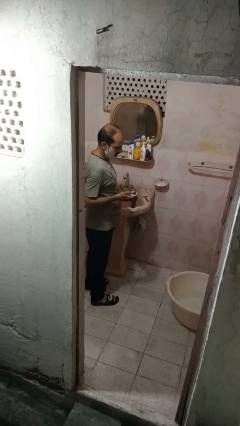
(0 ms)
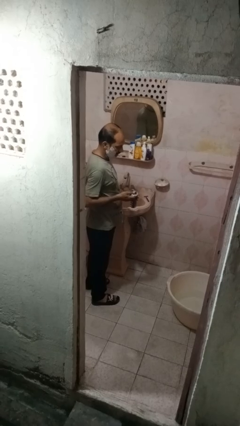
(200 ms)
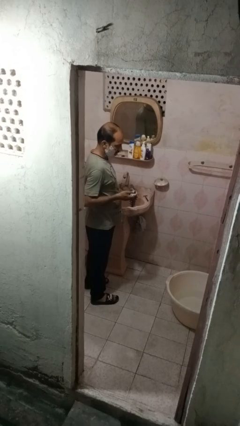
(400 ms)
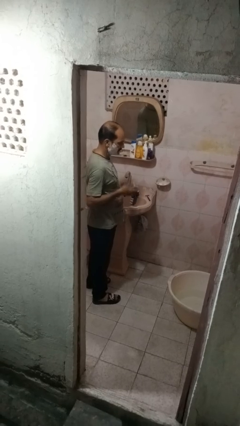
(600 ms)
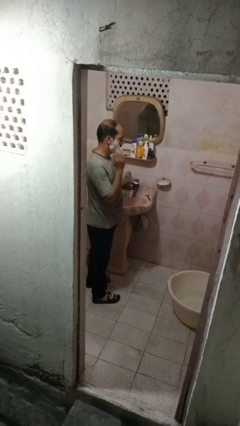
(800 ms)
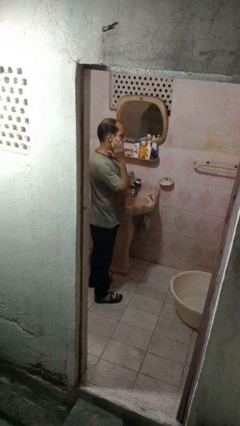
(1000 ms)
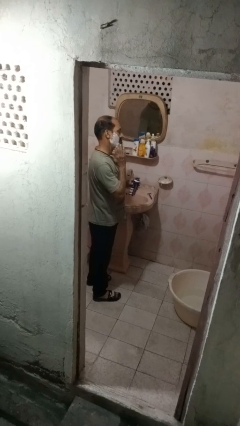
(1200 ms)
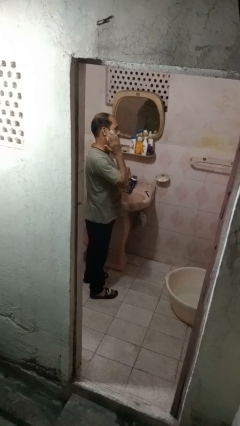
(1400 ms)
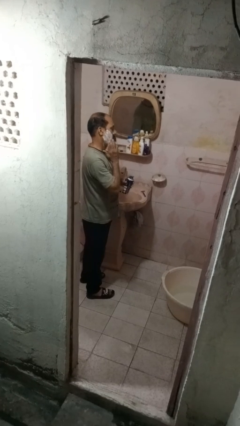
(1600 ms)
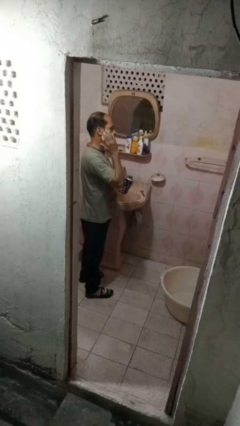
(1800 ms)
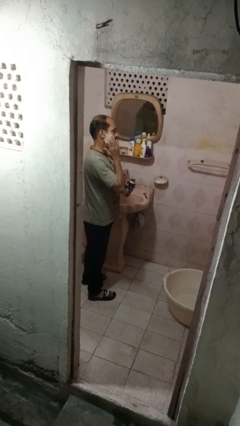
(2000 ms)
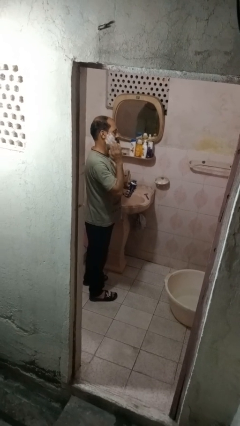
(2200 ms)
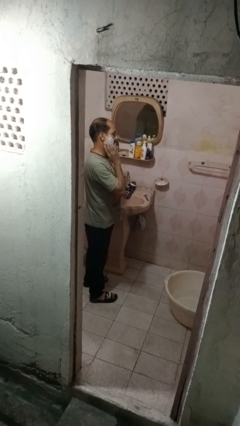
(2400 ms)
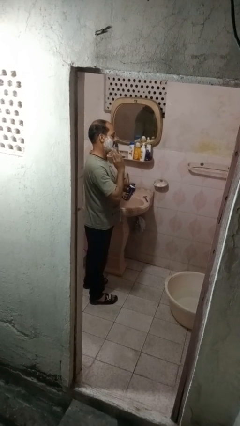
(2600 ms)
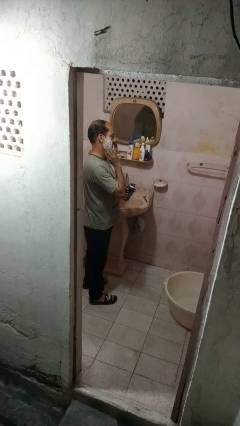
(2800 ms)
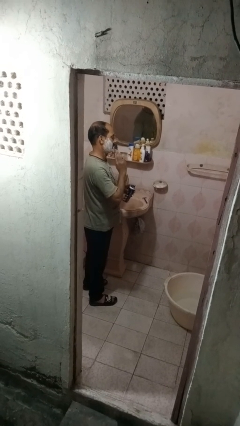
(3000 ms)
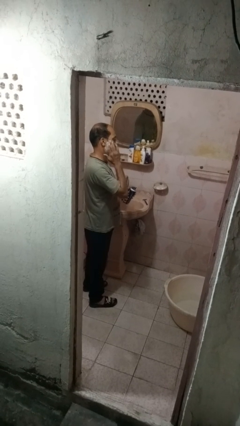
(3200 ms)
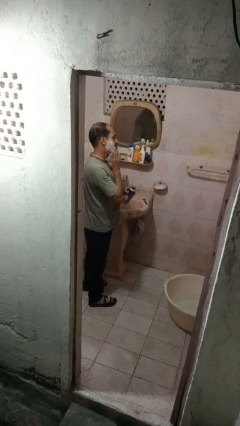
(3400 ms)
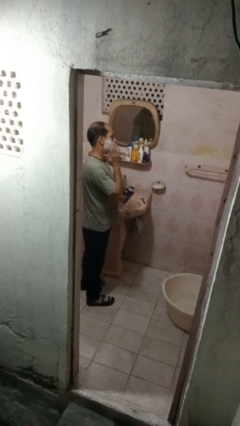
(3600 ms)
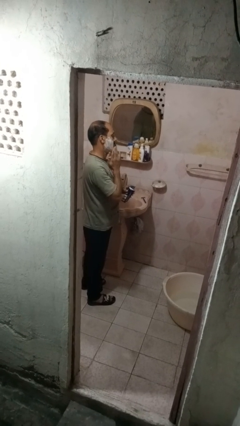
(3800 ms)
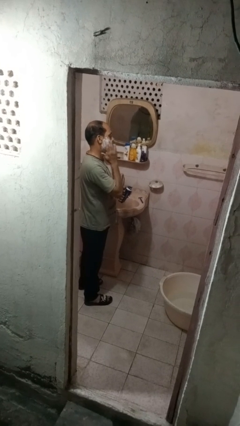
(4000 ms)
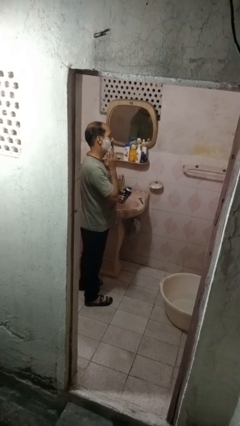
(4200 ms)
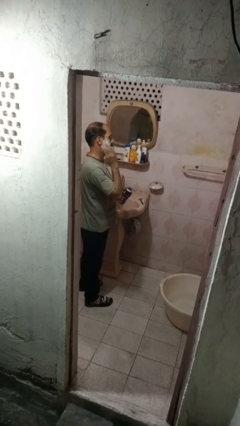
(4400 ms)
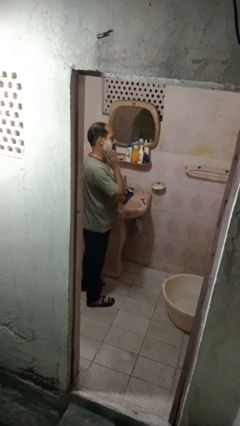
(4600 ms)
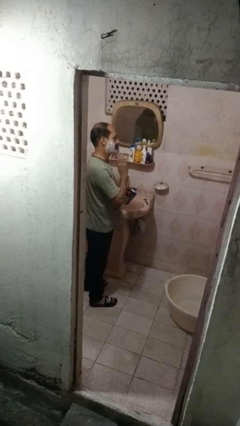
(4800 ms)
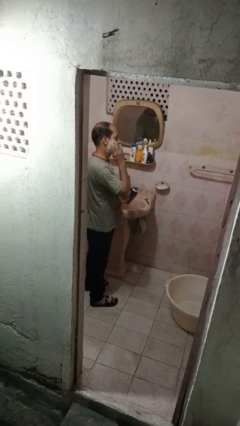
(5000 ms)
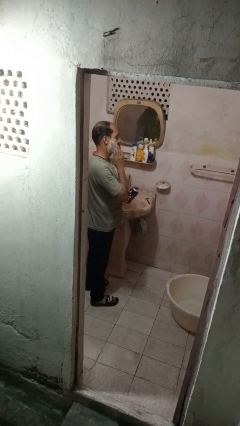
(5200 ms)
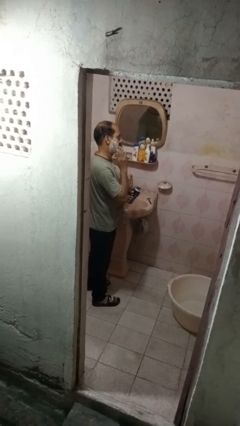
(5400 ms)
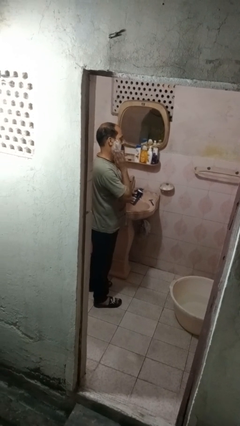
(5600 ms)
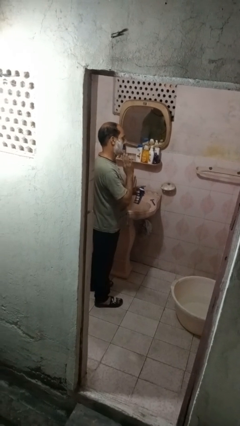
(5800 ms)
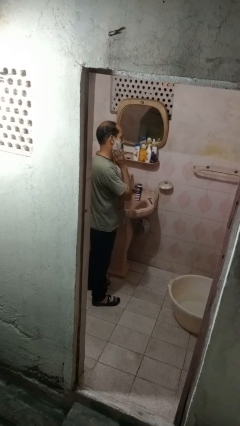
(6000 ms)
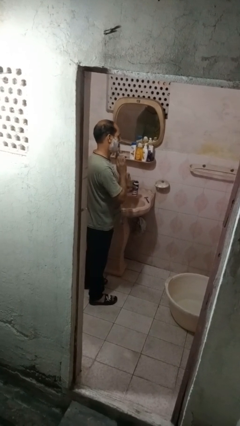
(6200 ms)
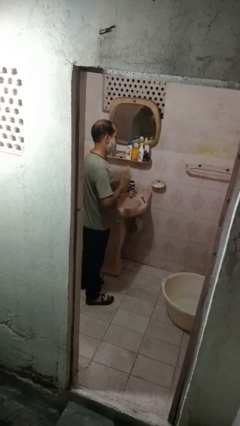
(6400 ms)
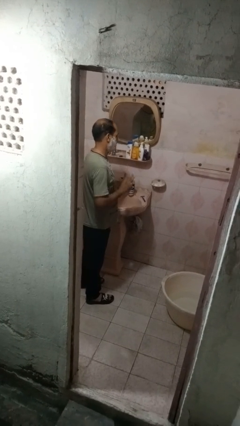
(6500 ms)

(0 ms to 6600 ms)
person applies shaving cream

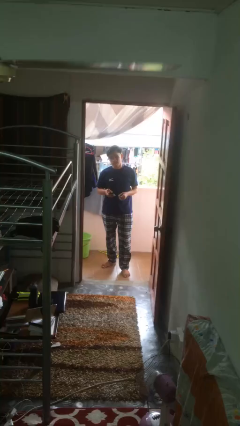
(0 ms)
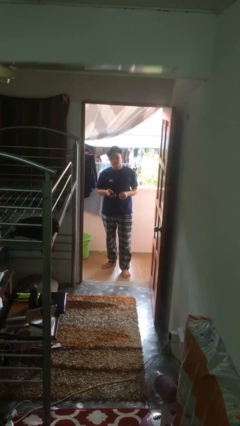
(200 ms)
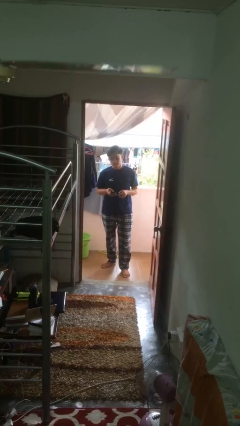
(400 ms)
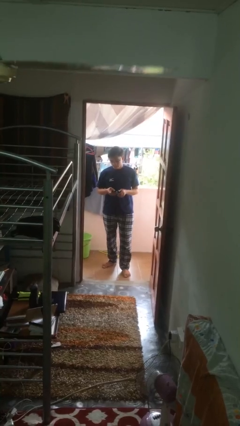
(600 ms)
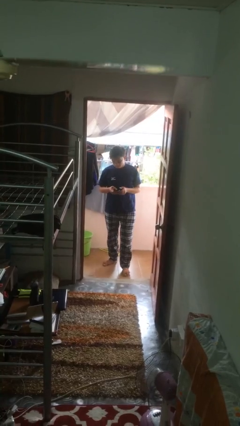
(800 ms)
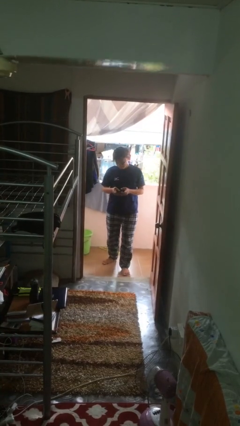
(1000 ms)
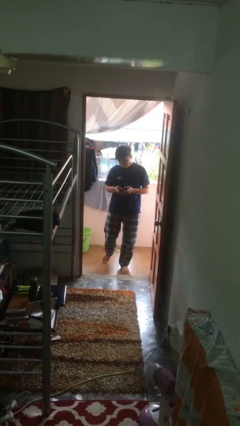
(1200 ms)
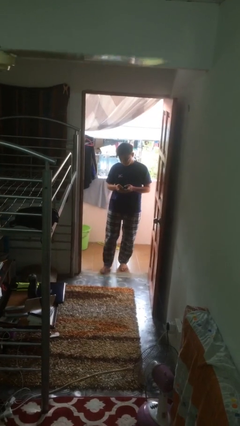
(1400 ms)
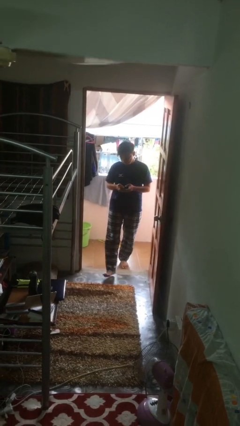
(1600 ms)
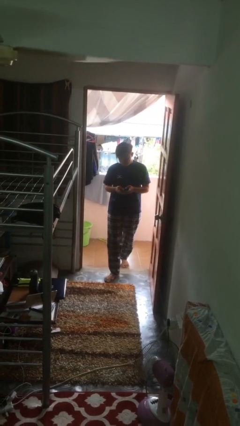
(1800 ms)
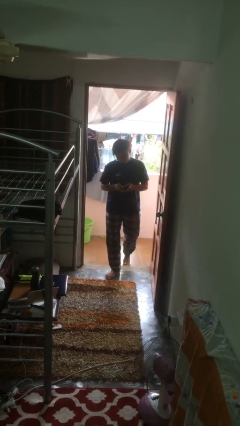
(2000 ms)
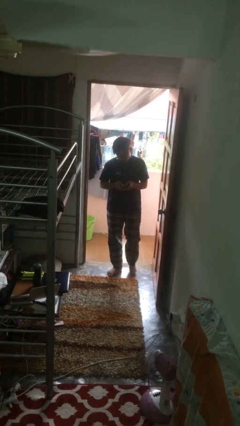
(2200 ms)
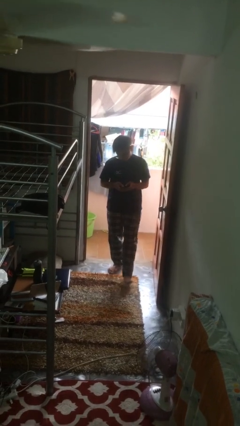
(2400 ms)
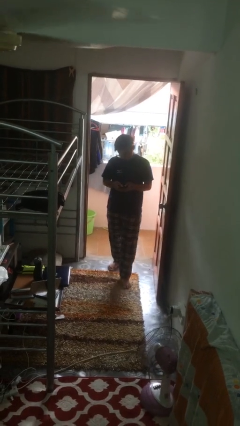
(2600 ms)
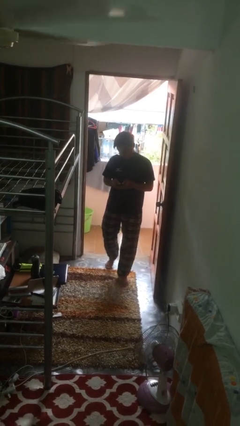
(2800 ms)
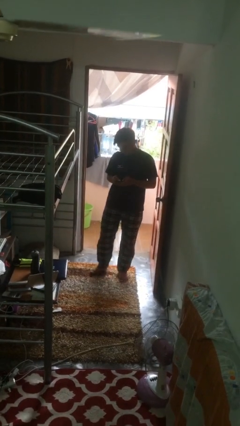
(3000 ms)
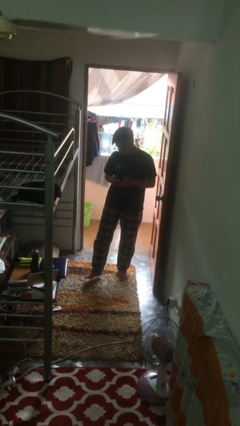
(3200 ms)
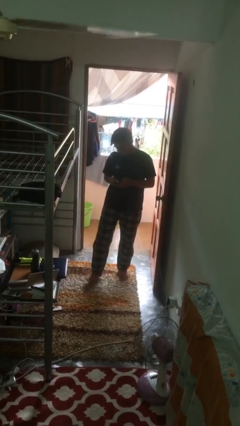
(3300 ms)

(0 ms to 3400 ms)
person enters scene through structure

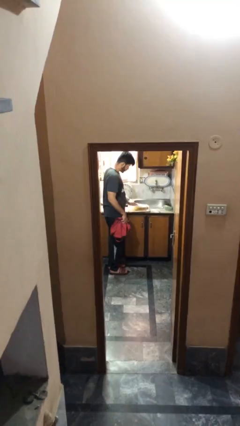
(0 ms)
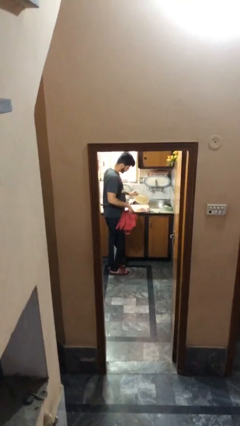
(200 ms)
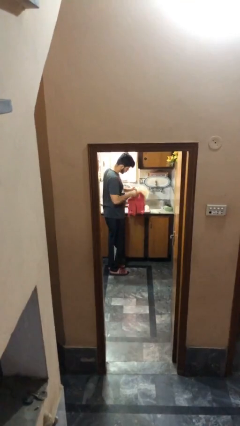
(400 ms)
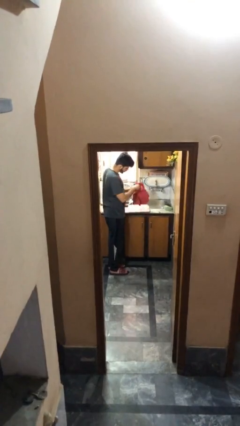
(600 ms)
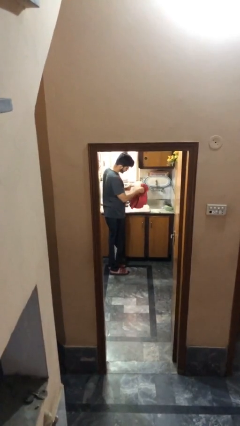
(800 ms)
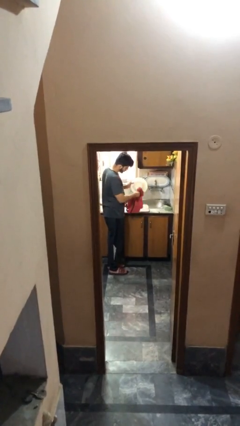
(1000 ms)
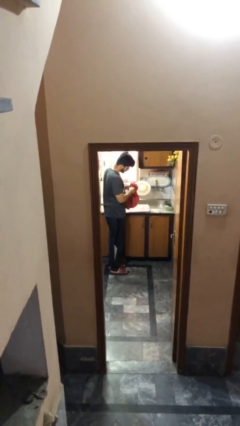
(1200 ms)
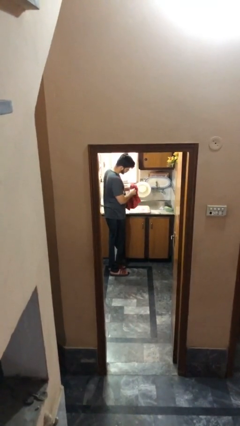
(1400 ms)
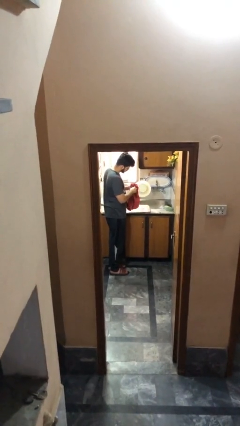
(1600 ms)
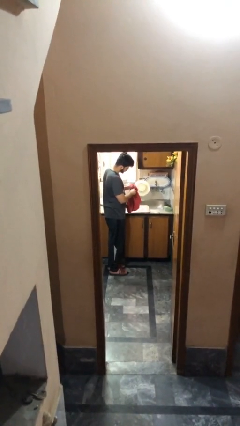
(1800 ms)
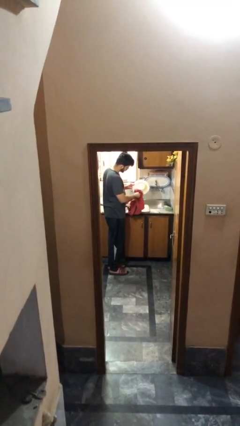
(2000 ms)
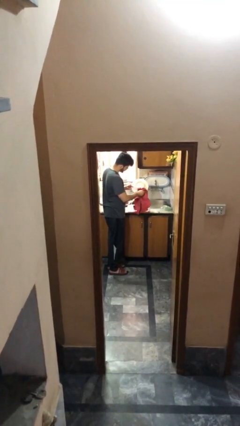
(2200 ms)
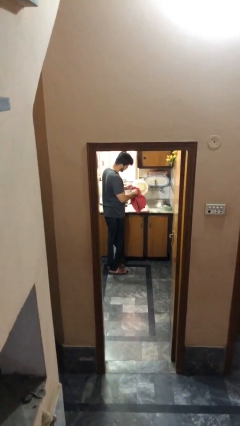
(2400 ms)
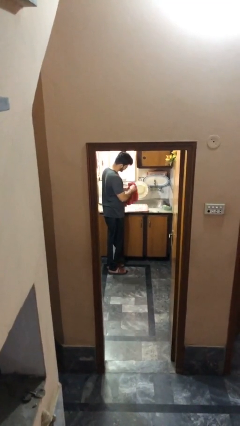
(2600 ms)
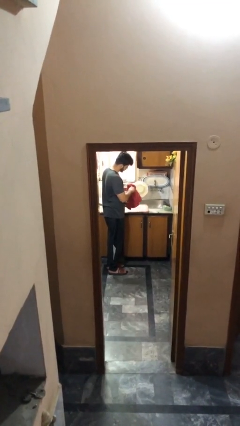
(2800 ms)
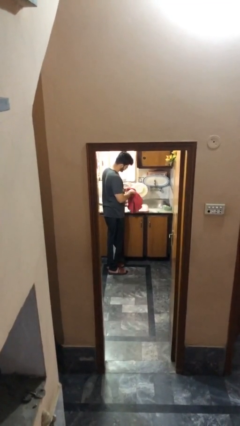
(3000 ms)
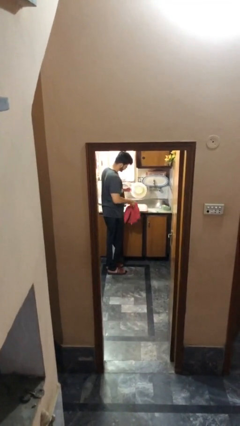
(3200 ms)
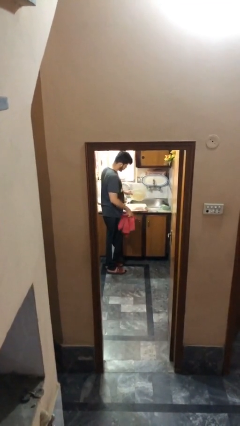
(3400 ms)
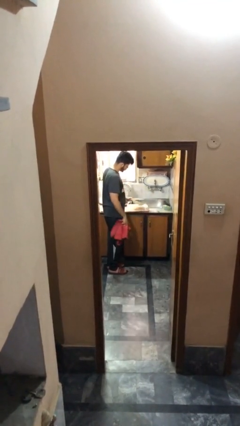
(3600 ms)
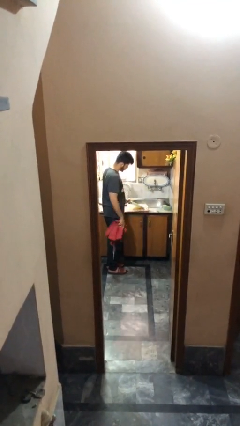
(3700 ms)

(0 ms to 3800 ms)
person dries dish

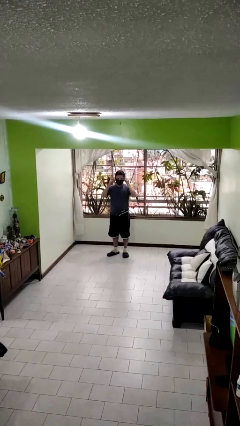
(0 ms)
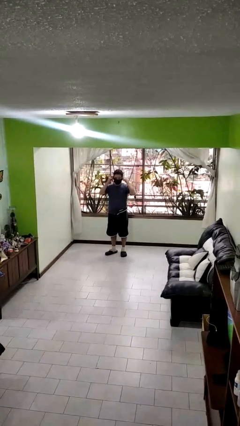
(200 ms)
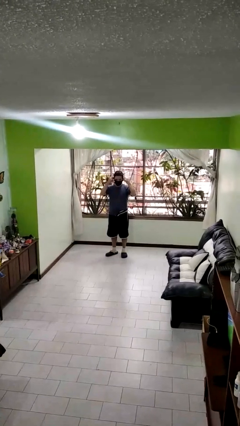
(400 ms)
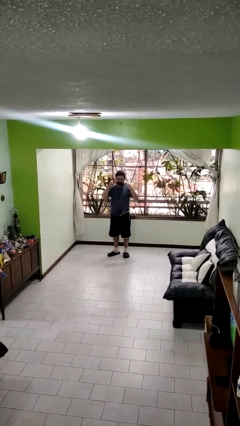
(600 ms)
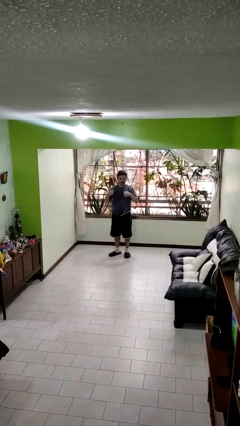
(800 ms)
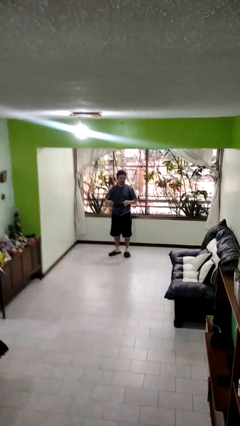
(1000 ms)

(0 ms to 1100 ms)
person takes off facemask

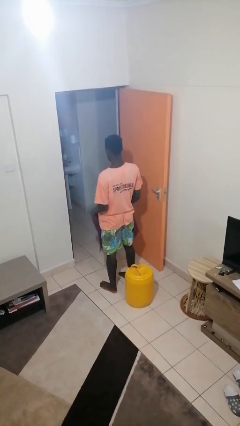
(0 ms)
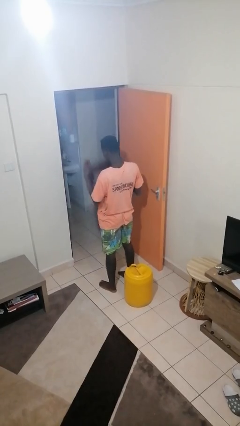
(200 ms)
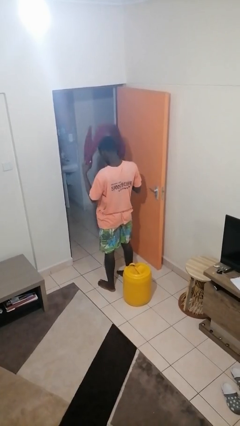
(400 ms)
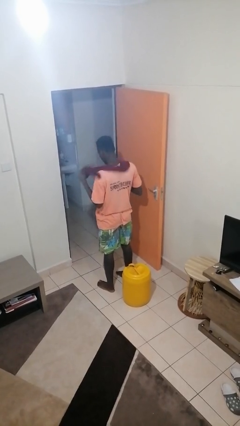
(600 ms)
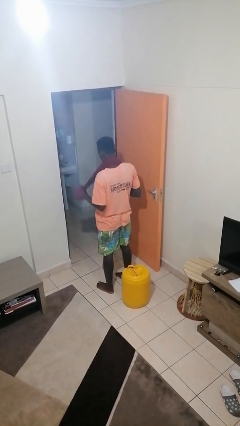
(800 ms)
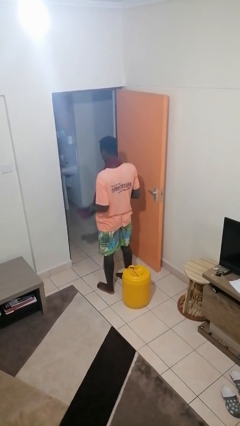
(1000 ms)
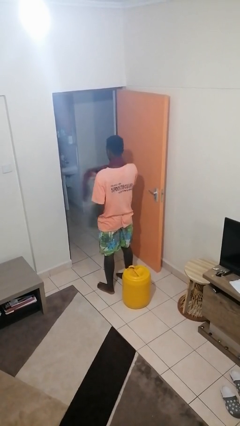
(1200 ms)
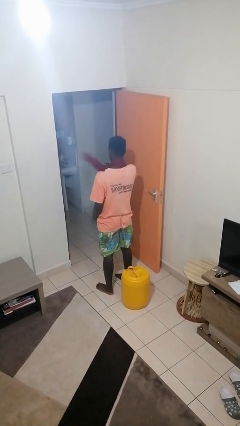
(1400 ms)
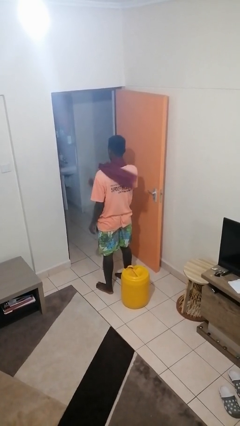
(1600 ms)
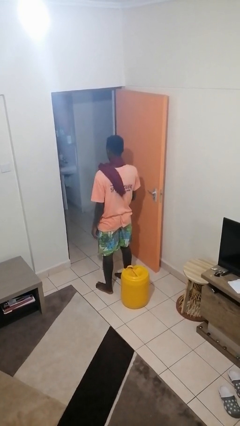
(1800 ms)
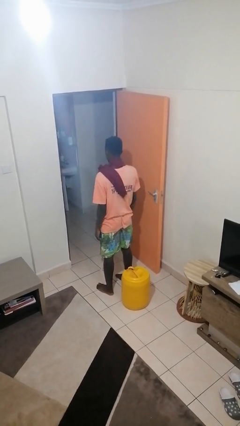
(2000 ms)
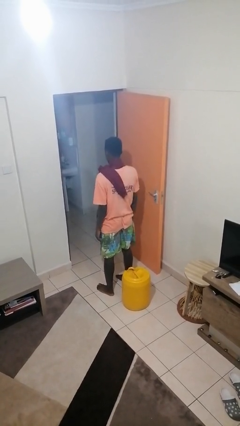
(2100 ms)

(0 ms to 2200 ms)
person puts on scarf

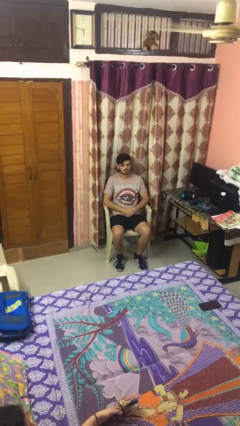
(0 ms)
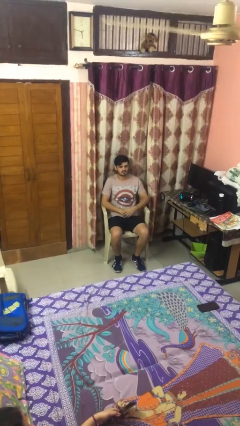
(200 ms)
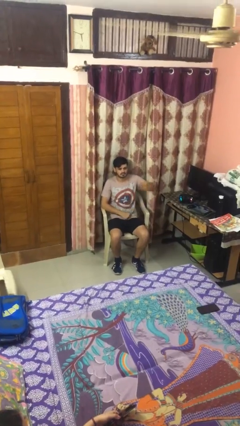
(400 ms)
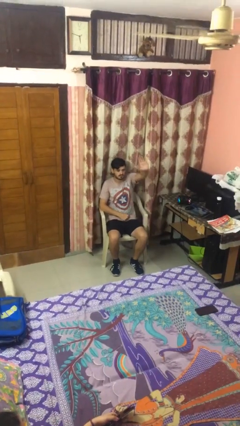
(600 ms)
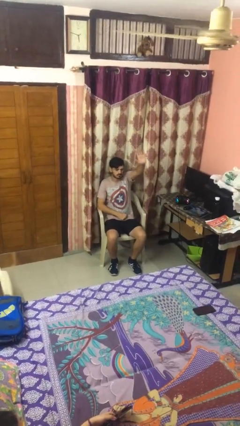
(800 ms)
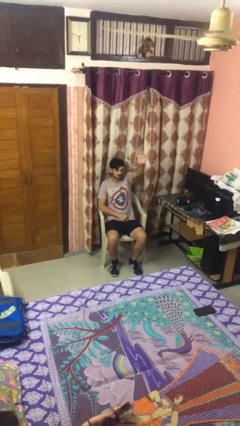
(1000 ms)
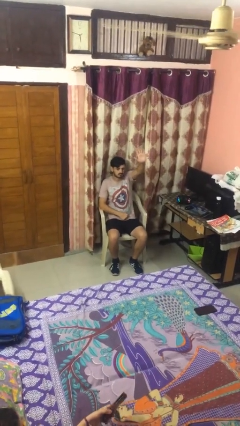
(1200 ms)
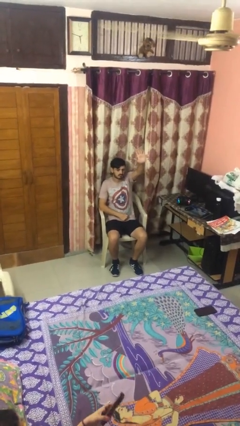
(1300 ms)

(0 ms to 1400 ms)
person gestures raise hand
